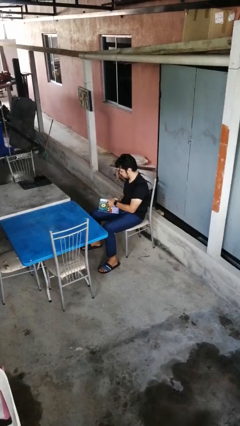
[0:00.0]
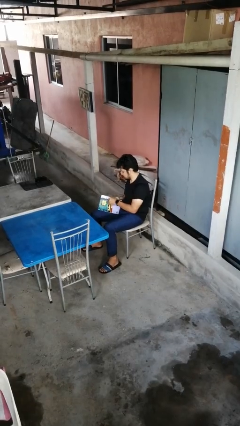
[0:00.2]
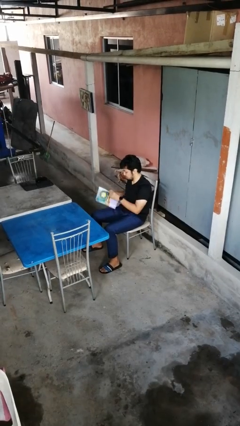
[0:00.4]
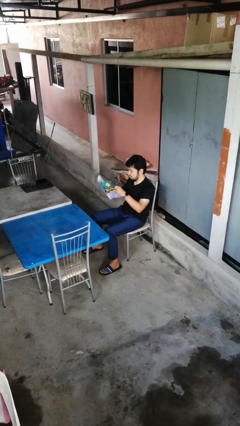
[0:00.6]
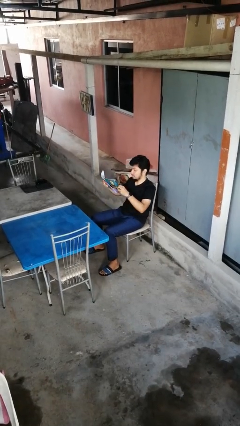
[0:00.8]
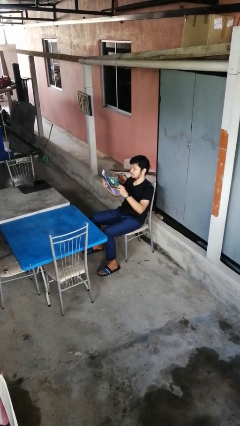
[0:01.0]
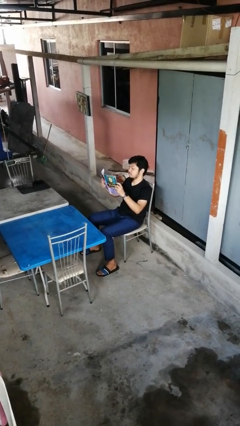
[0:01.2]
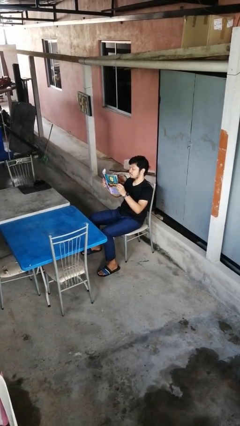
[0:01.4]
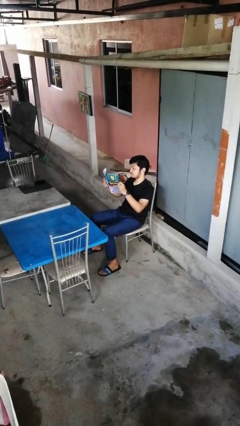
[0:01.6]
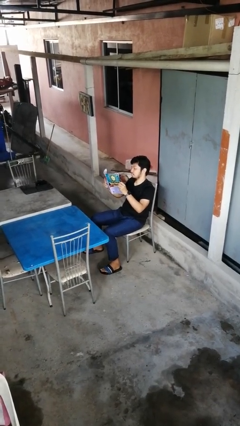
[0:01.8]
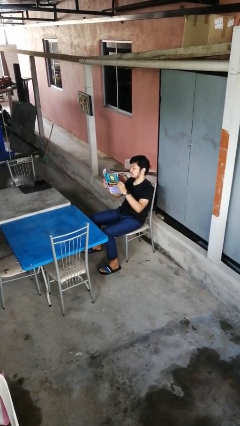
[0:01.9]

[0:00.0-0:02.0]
person reads magazine

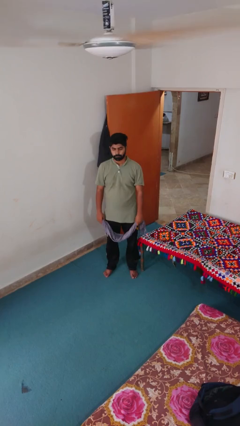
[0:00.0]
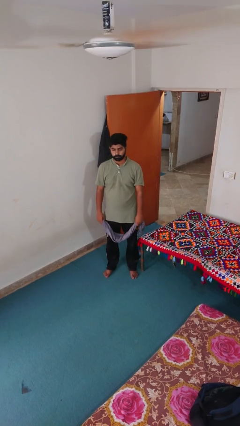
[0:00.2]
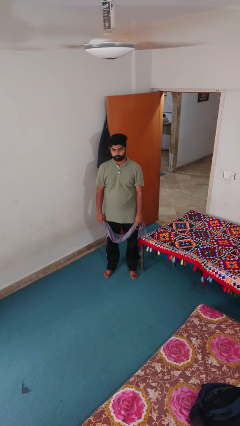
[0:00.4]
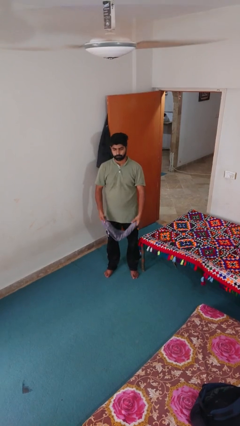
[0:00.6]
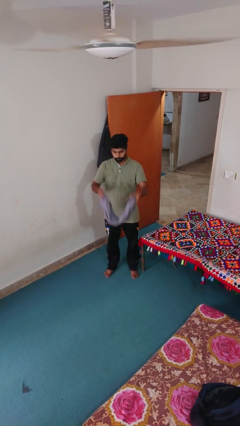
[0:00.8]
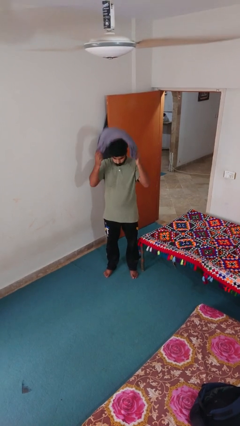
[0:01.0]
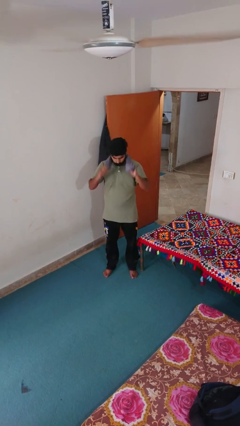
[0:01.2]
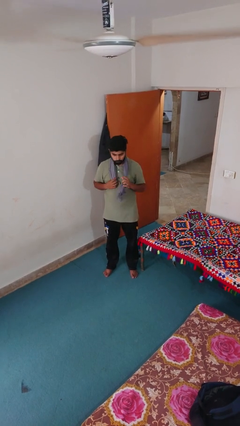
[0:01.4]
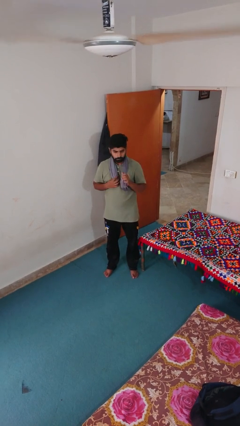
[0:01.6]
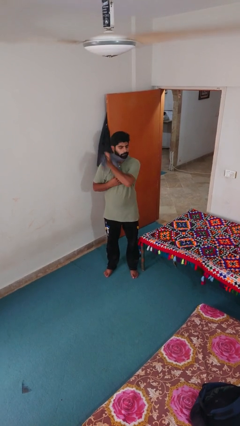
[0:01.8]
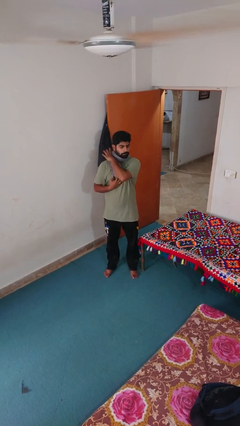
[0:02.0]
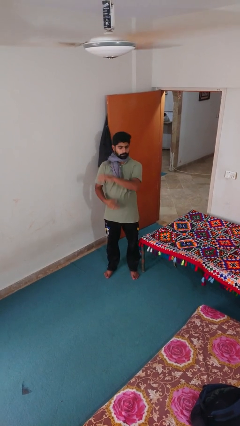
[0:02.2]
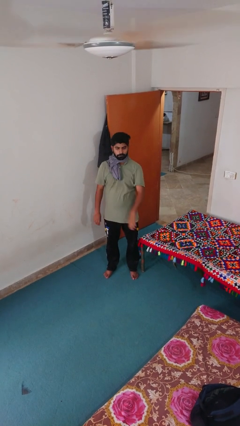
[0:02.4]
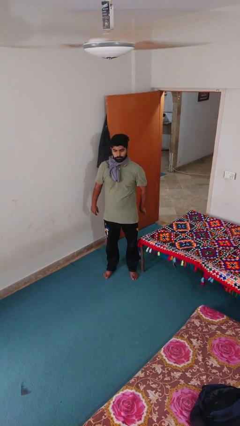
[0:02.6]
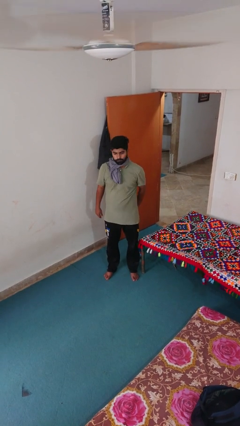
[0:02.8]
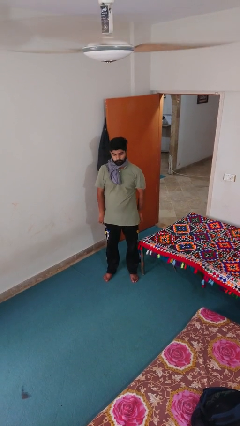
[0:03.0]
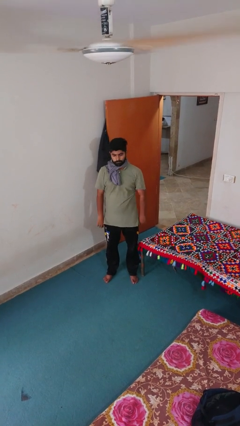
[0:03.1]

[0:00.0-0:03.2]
person puts on scarf

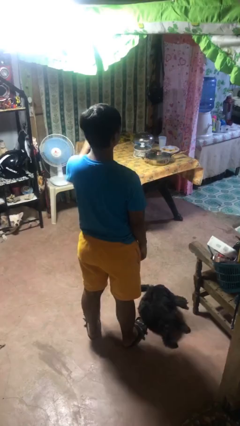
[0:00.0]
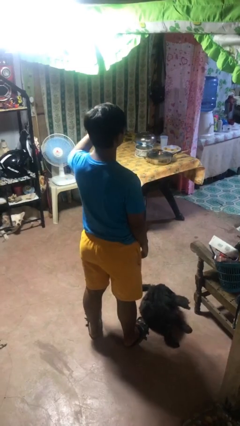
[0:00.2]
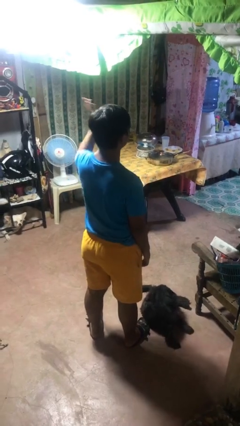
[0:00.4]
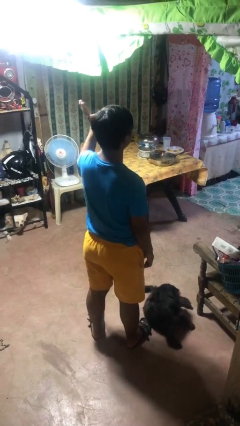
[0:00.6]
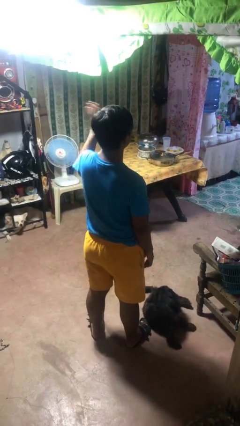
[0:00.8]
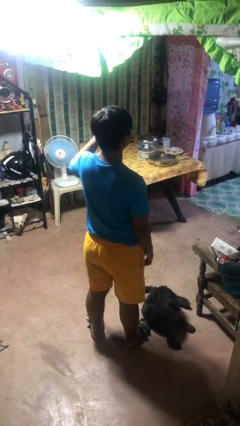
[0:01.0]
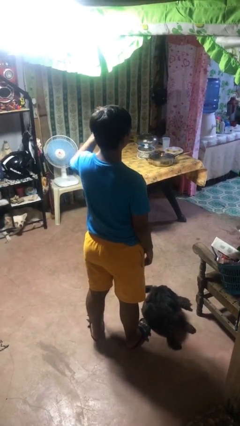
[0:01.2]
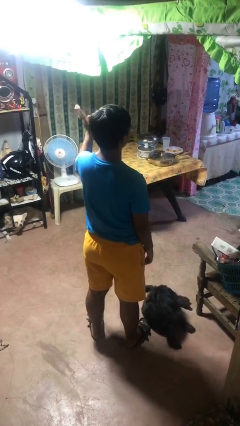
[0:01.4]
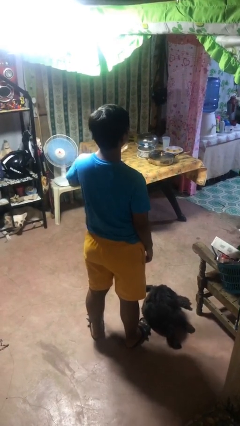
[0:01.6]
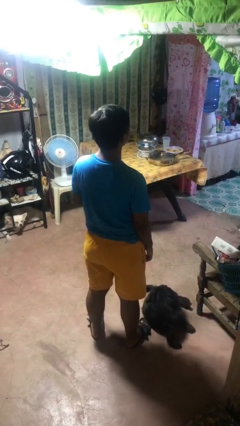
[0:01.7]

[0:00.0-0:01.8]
person waves at person

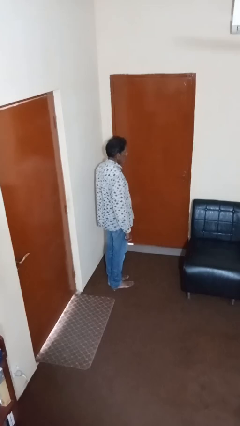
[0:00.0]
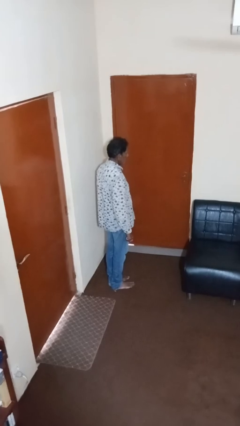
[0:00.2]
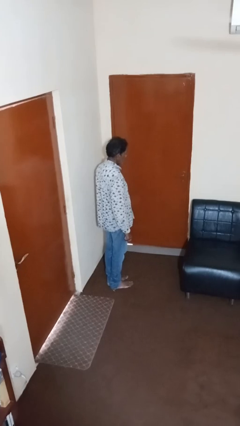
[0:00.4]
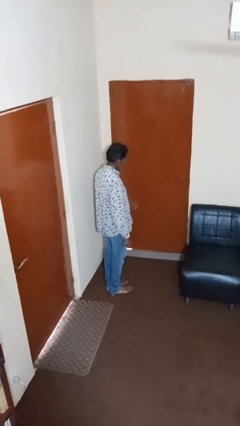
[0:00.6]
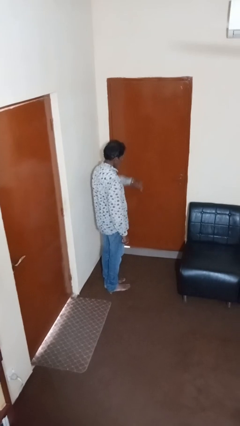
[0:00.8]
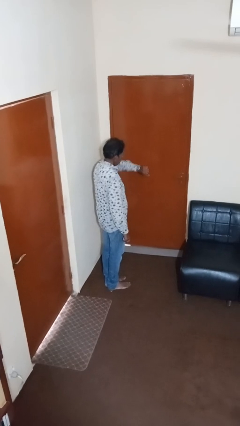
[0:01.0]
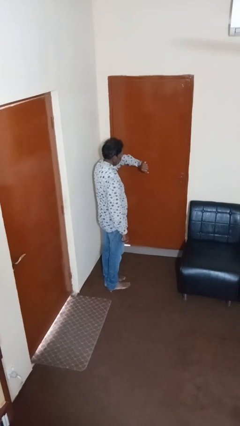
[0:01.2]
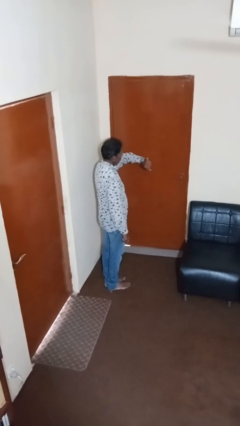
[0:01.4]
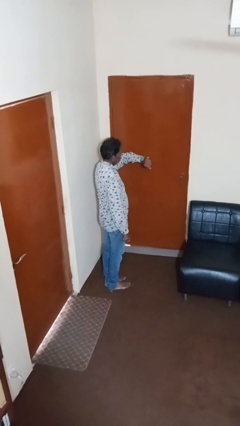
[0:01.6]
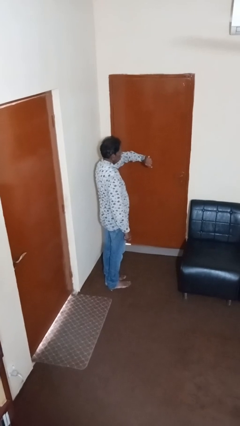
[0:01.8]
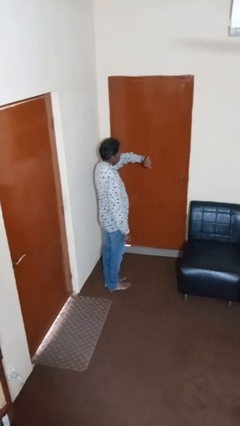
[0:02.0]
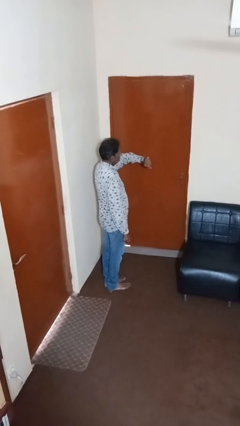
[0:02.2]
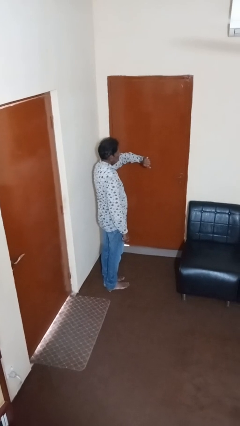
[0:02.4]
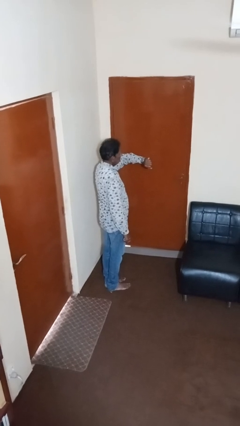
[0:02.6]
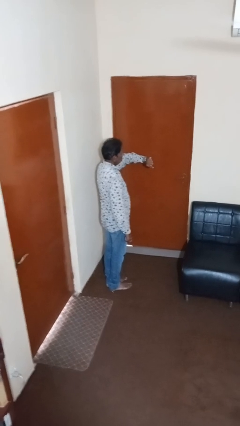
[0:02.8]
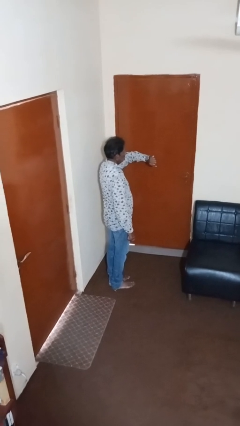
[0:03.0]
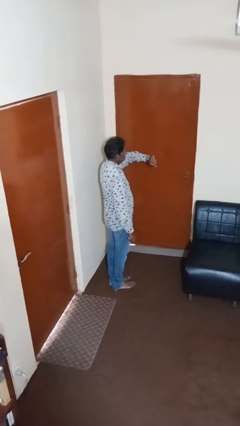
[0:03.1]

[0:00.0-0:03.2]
person looks at wristwatch

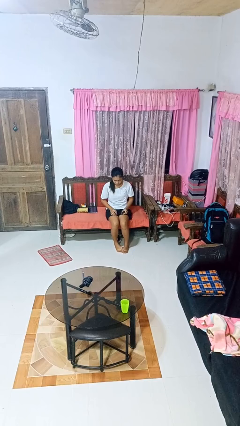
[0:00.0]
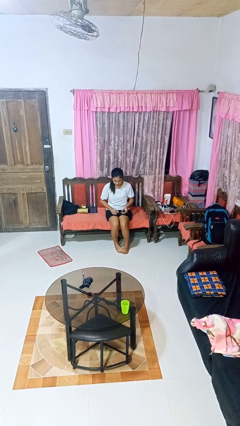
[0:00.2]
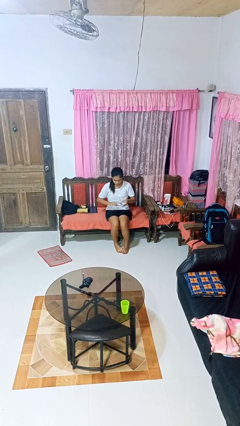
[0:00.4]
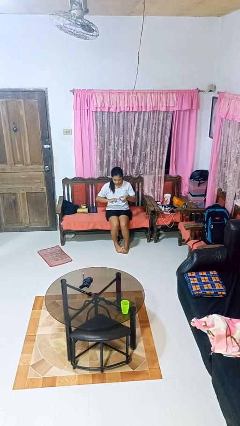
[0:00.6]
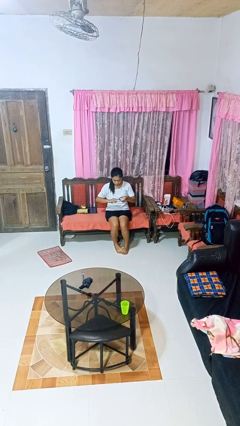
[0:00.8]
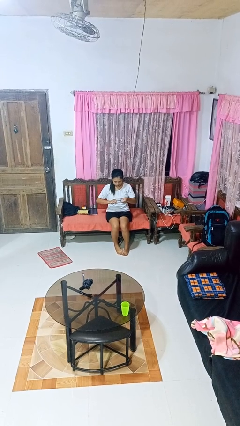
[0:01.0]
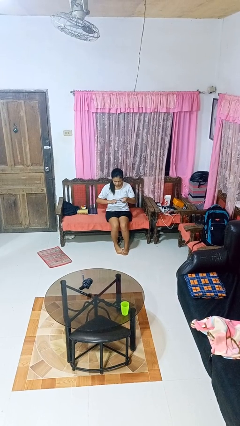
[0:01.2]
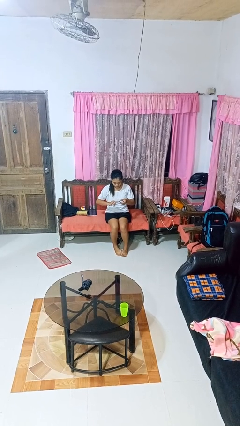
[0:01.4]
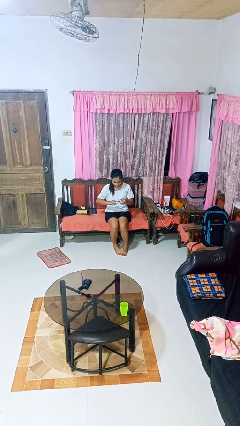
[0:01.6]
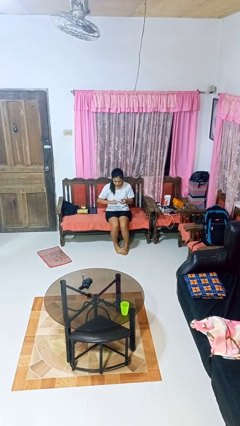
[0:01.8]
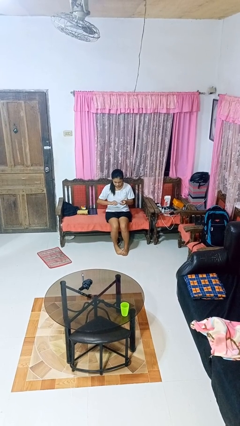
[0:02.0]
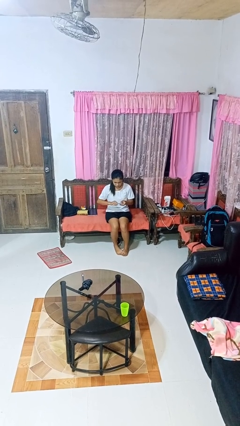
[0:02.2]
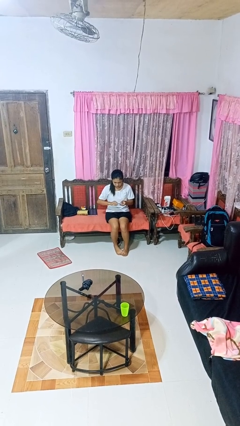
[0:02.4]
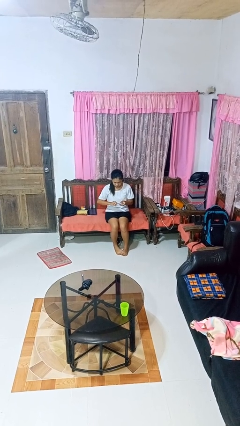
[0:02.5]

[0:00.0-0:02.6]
person clips fingernails

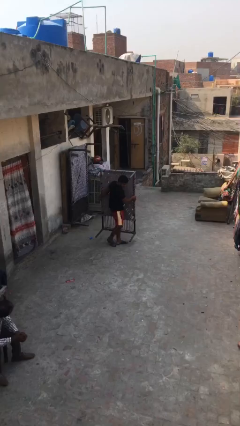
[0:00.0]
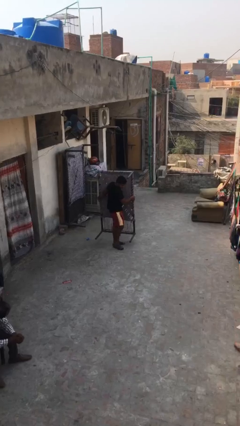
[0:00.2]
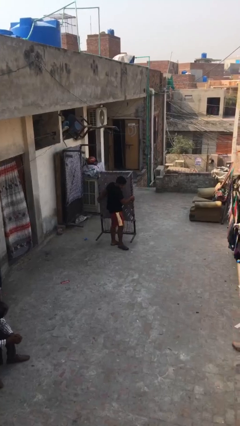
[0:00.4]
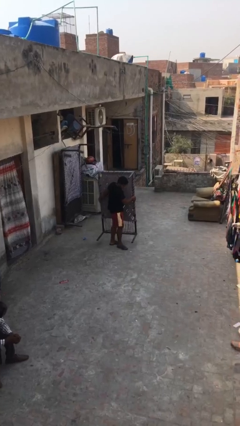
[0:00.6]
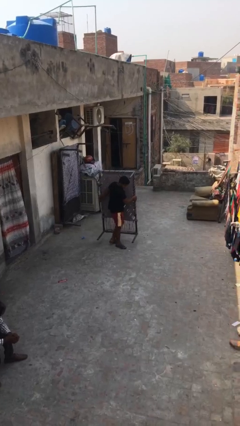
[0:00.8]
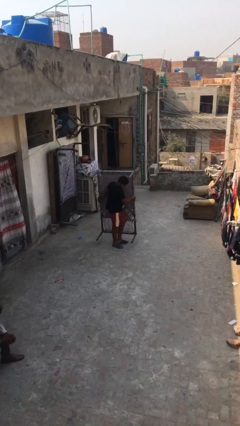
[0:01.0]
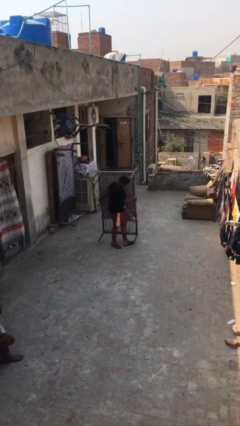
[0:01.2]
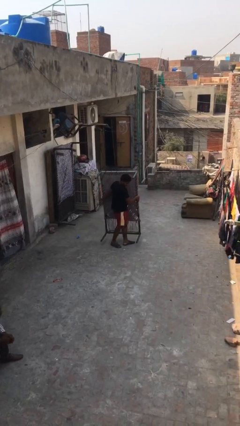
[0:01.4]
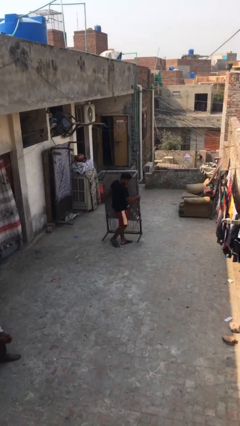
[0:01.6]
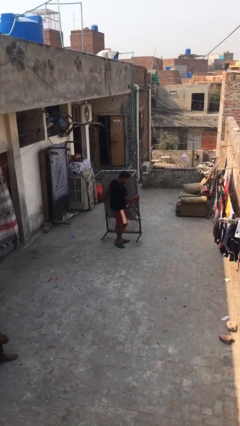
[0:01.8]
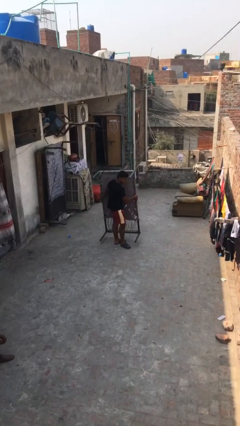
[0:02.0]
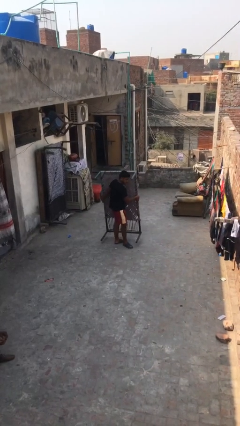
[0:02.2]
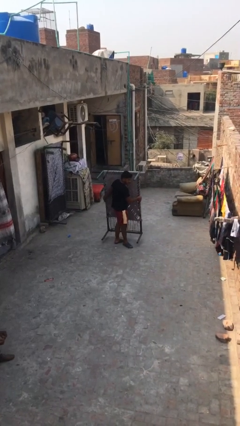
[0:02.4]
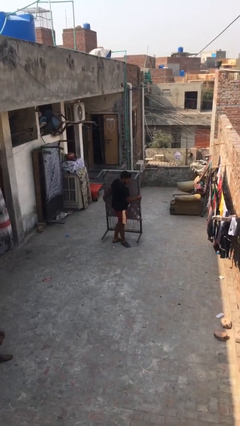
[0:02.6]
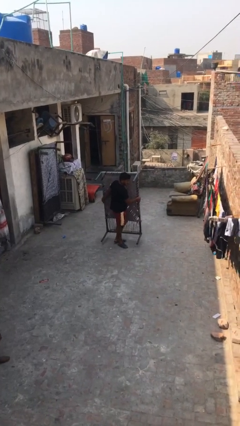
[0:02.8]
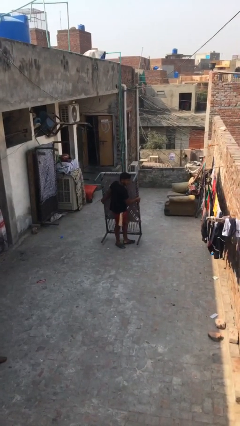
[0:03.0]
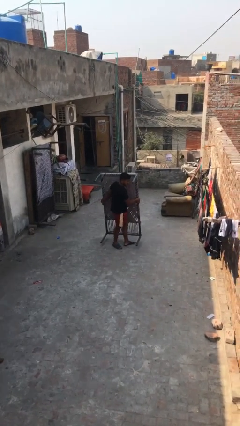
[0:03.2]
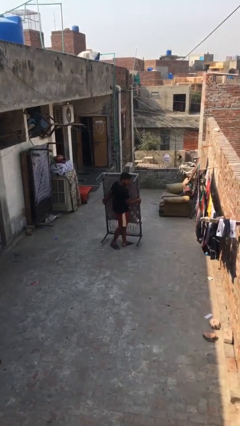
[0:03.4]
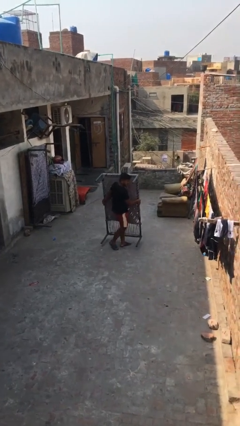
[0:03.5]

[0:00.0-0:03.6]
person carries heavy object

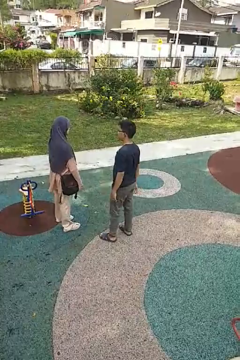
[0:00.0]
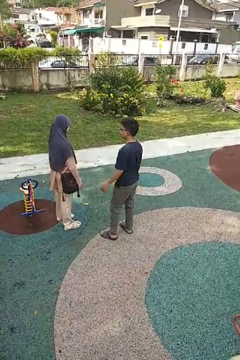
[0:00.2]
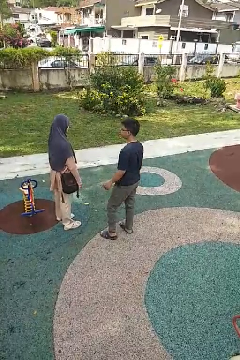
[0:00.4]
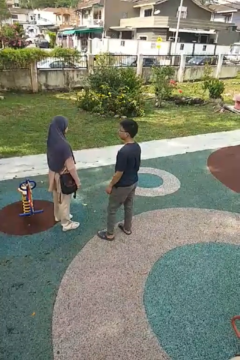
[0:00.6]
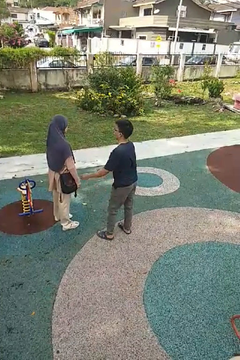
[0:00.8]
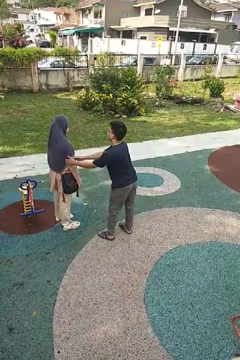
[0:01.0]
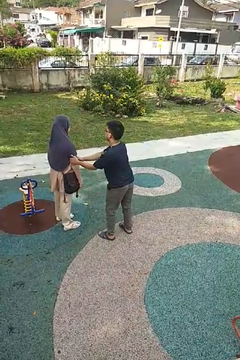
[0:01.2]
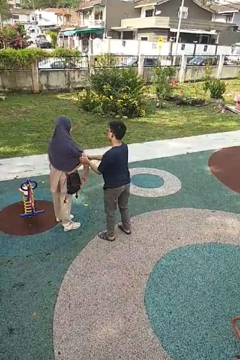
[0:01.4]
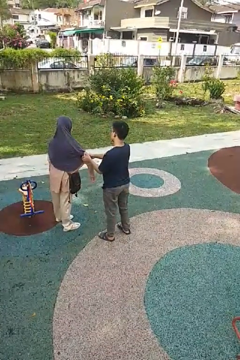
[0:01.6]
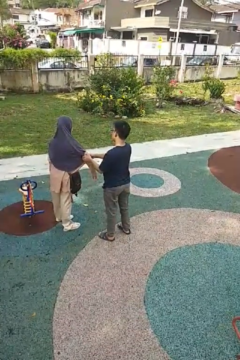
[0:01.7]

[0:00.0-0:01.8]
person grabs person by bicep
